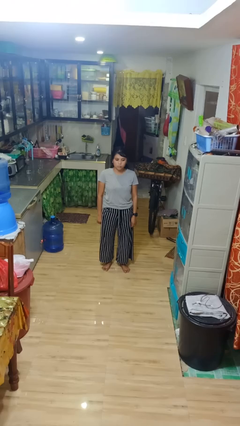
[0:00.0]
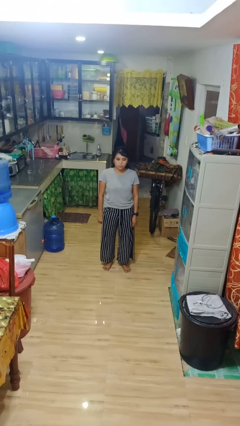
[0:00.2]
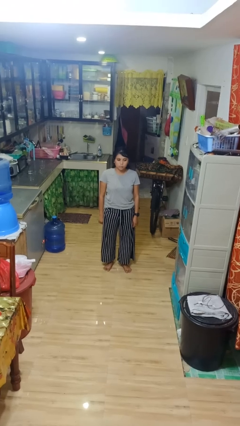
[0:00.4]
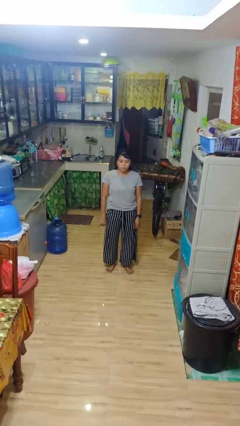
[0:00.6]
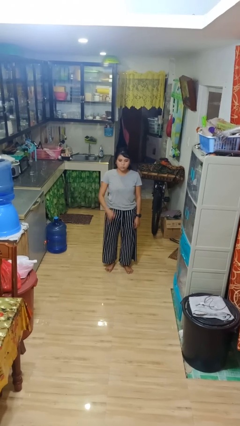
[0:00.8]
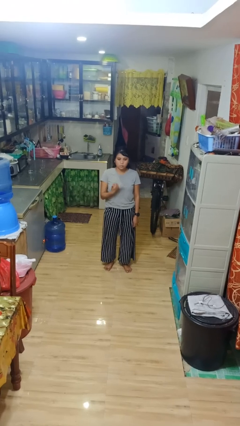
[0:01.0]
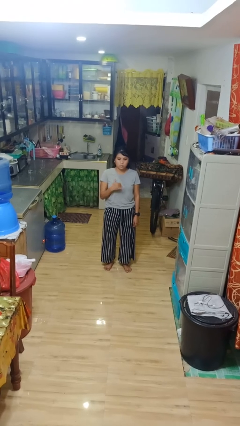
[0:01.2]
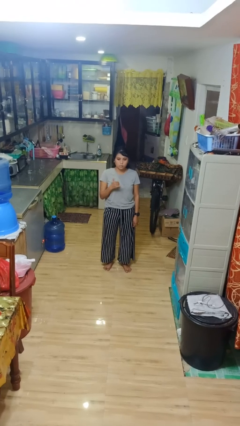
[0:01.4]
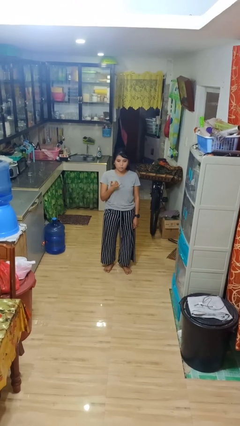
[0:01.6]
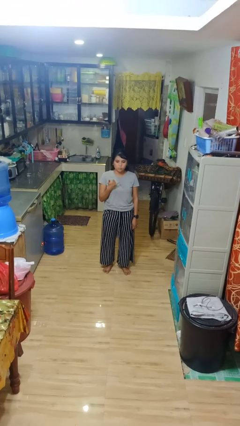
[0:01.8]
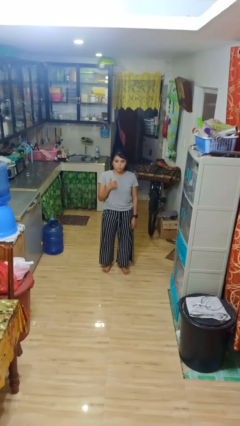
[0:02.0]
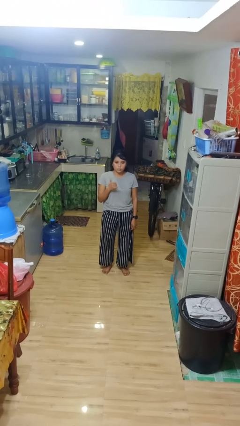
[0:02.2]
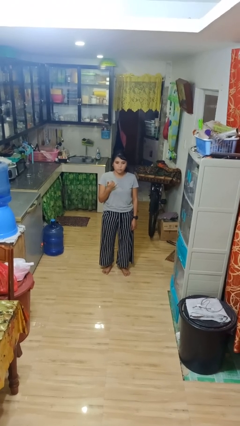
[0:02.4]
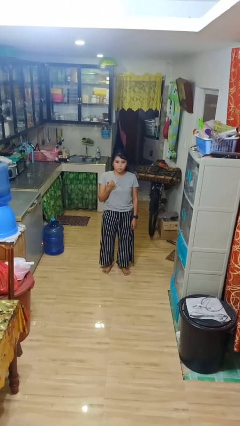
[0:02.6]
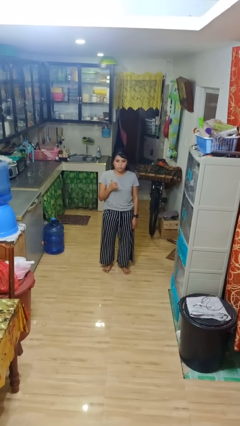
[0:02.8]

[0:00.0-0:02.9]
person gestures hang loose

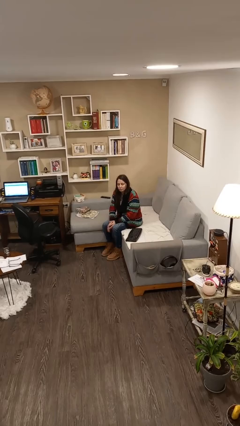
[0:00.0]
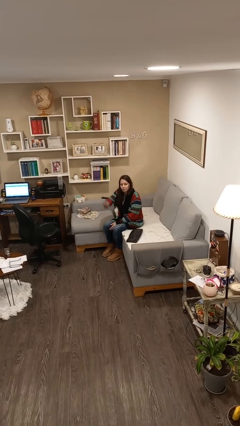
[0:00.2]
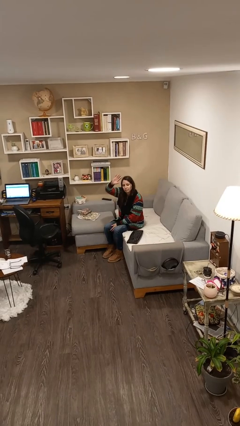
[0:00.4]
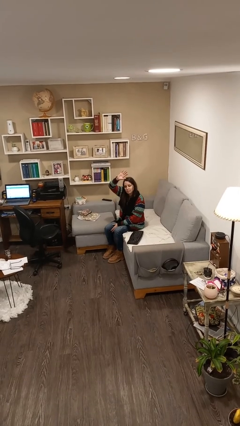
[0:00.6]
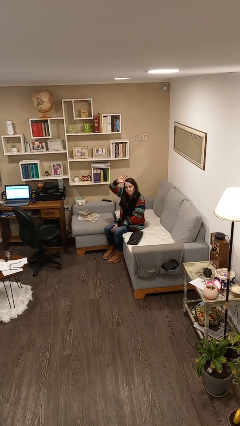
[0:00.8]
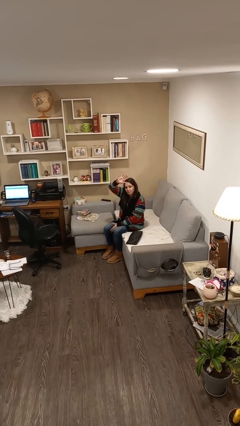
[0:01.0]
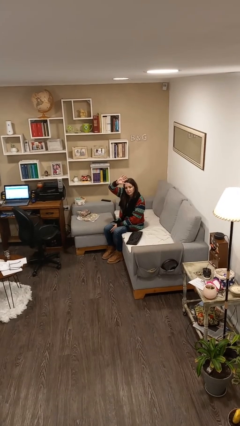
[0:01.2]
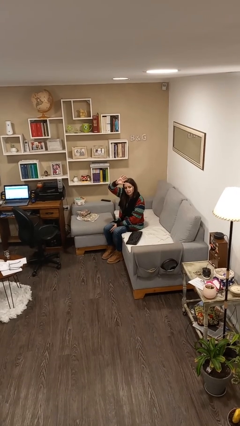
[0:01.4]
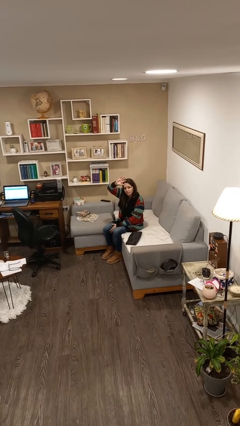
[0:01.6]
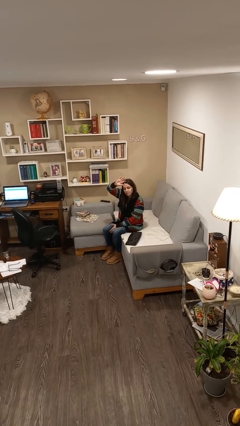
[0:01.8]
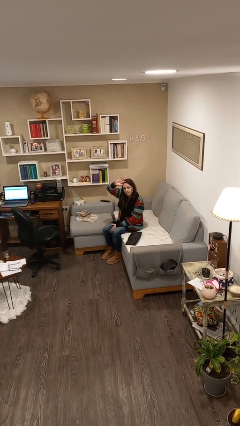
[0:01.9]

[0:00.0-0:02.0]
person gestures raise hand

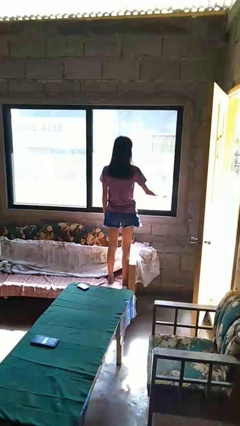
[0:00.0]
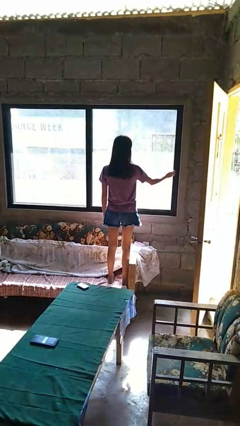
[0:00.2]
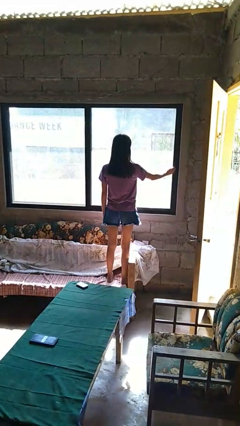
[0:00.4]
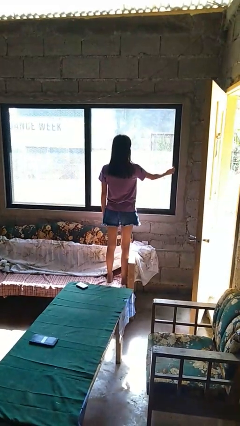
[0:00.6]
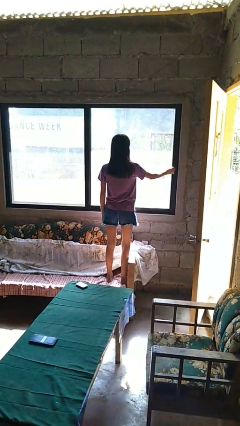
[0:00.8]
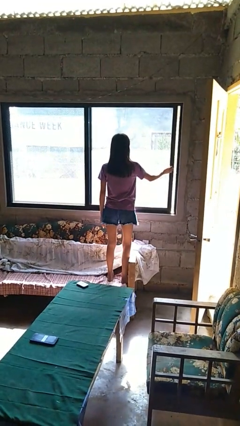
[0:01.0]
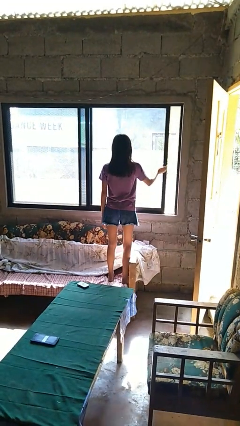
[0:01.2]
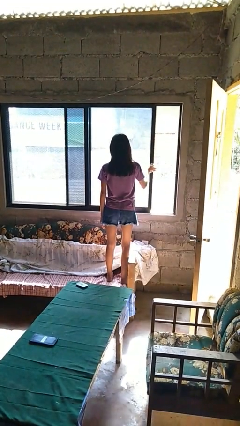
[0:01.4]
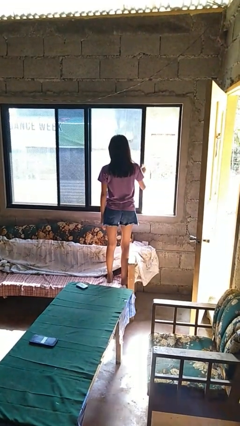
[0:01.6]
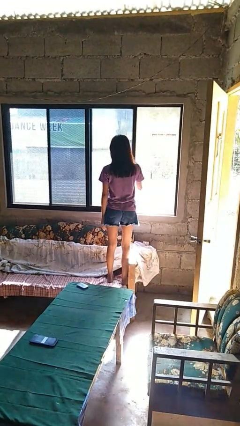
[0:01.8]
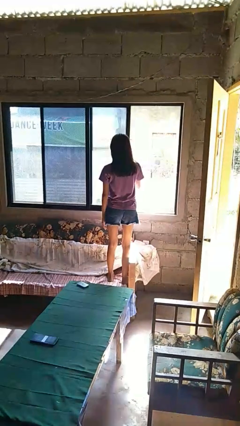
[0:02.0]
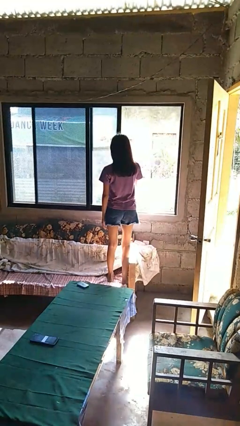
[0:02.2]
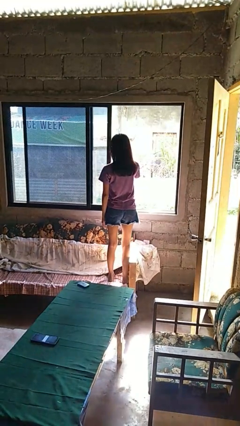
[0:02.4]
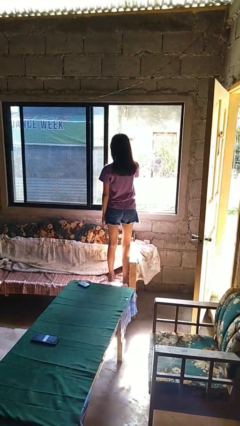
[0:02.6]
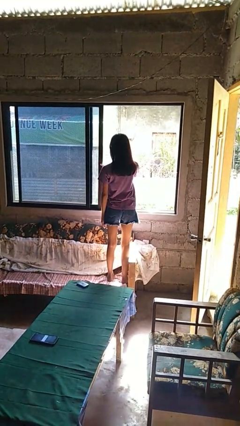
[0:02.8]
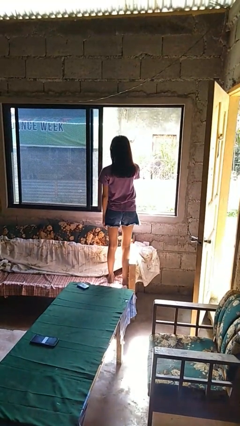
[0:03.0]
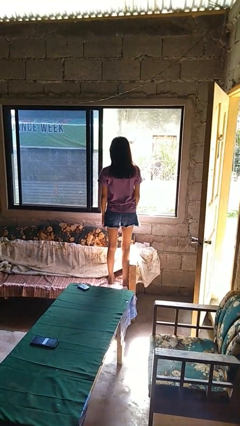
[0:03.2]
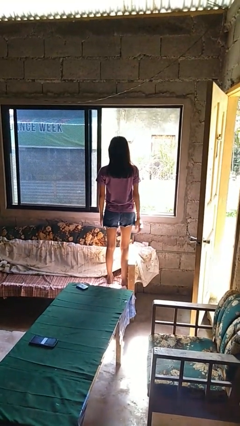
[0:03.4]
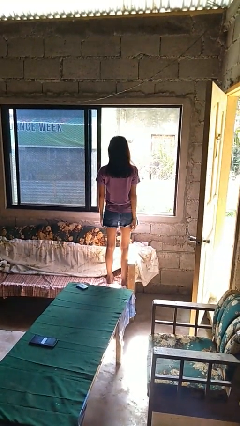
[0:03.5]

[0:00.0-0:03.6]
person opens home window

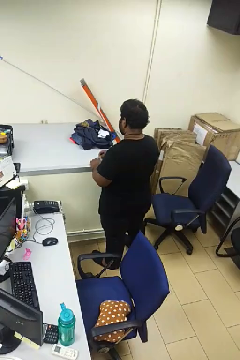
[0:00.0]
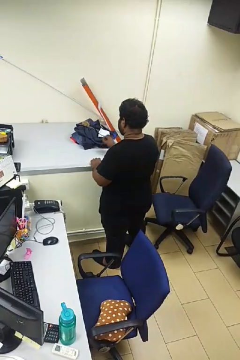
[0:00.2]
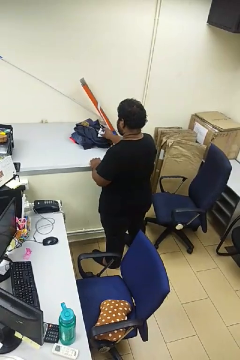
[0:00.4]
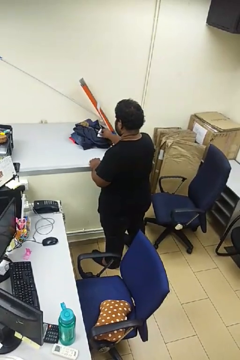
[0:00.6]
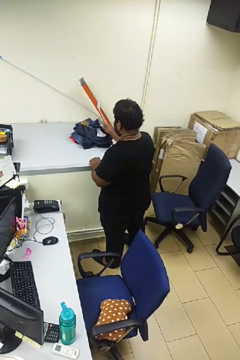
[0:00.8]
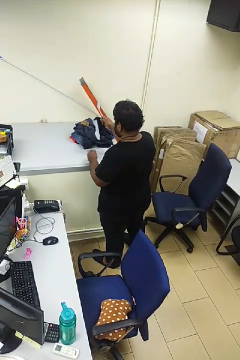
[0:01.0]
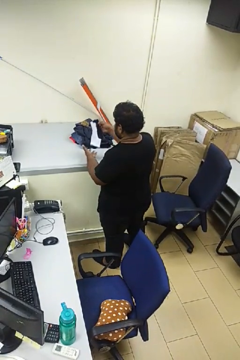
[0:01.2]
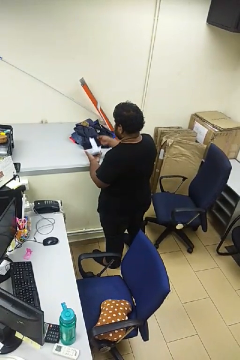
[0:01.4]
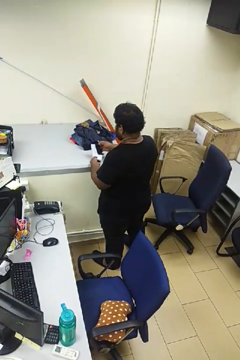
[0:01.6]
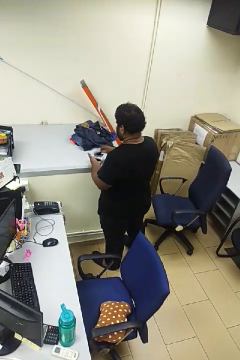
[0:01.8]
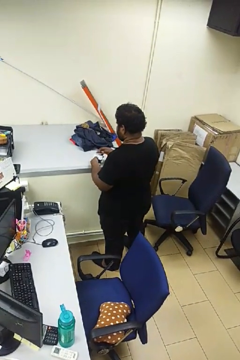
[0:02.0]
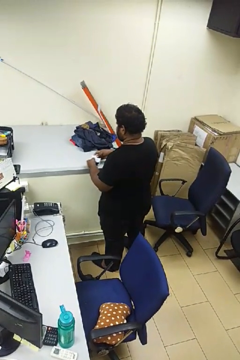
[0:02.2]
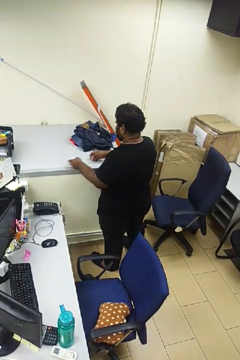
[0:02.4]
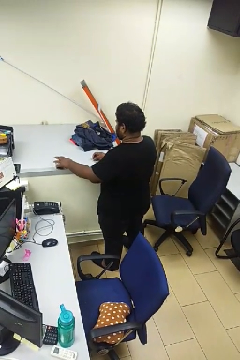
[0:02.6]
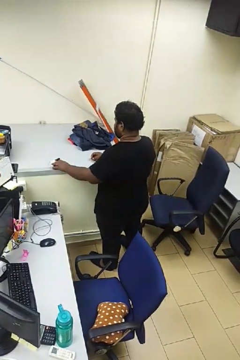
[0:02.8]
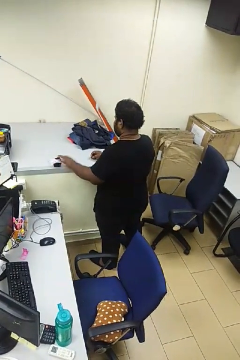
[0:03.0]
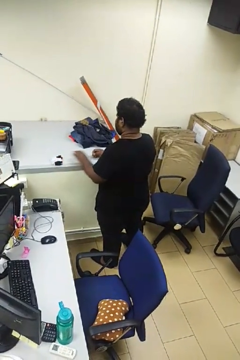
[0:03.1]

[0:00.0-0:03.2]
person folds socks

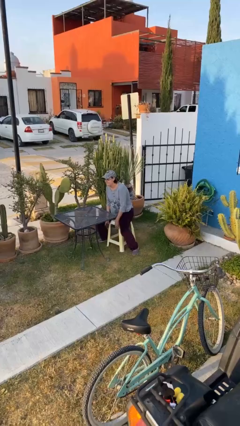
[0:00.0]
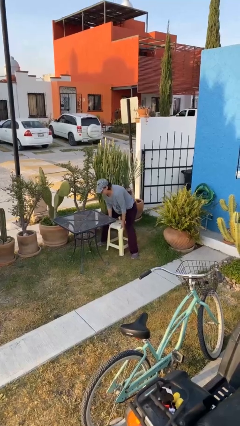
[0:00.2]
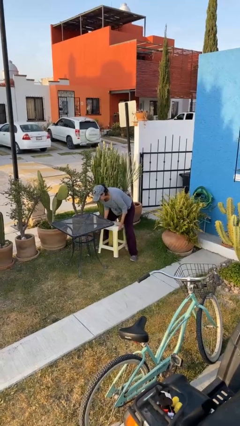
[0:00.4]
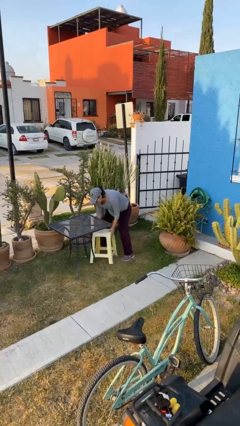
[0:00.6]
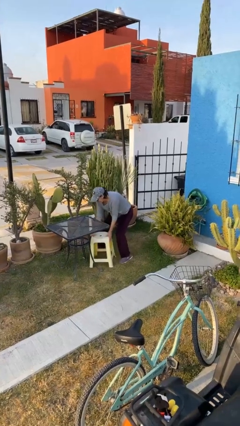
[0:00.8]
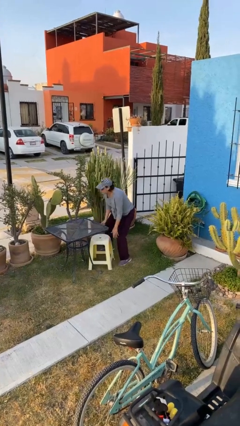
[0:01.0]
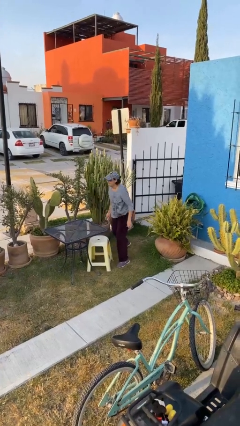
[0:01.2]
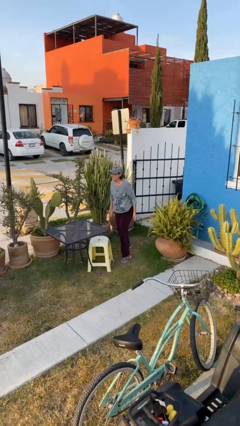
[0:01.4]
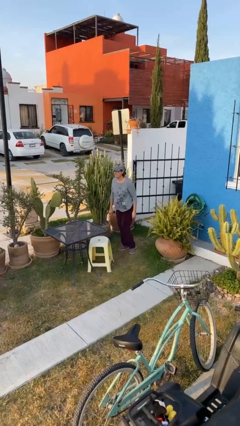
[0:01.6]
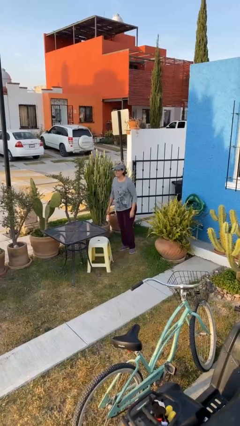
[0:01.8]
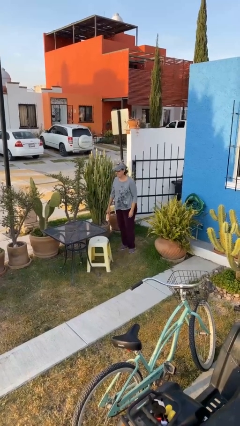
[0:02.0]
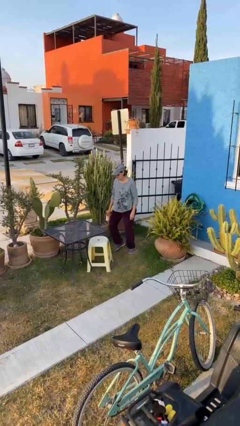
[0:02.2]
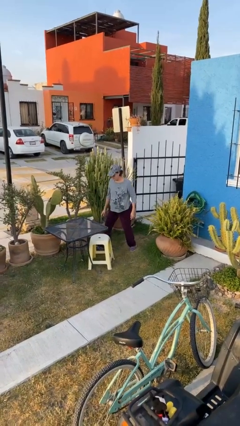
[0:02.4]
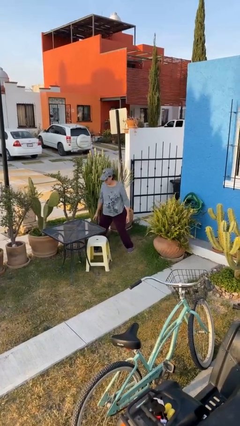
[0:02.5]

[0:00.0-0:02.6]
person stands up

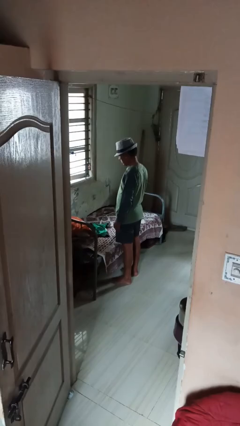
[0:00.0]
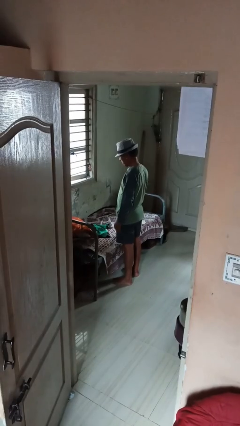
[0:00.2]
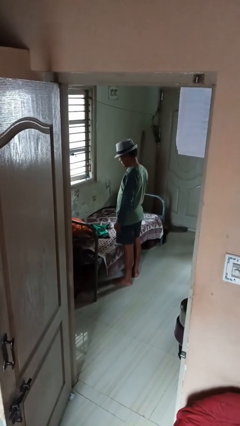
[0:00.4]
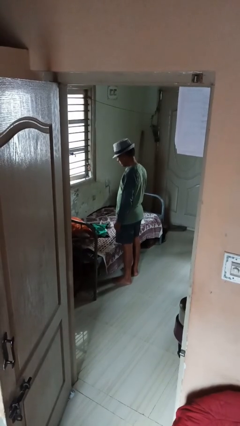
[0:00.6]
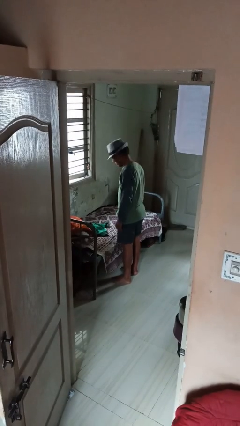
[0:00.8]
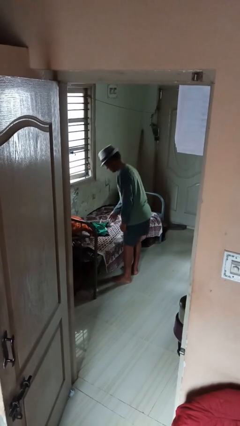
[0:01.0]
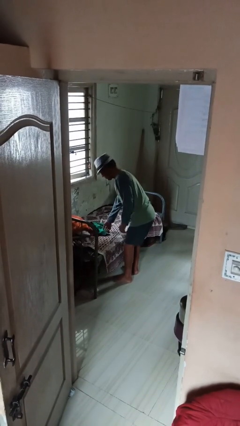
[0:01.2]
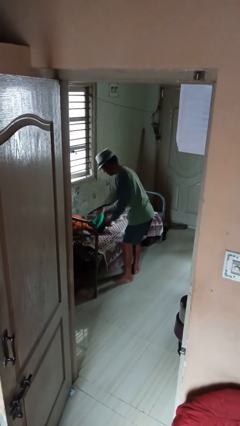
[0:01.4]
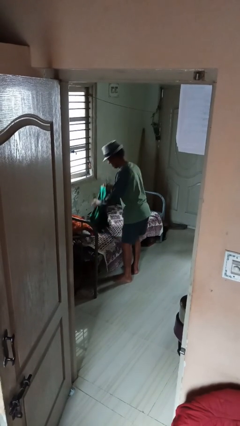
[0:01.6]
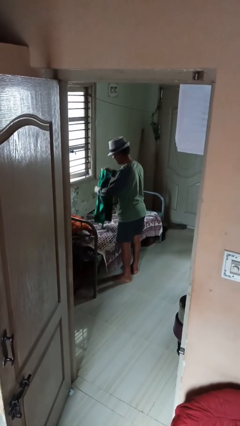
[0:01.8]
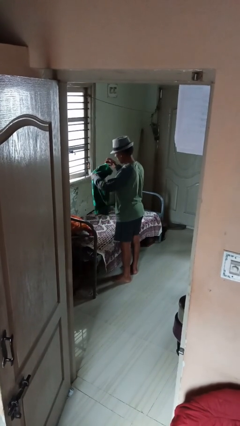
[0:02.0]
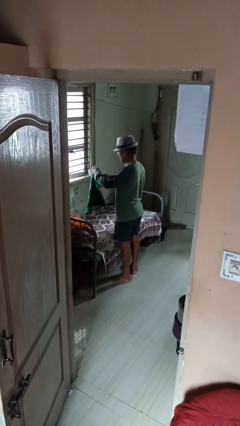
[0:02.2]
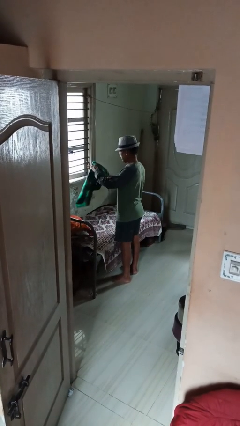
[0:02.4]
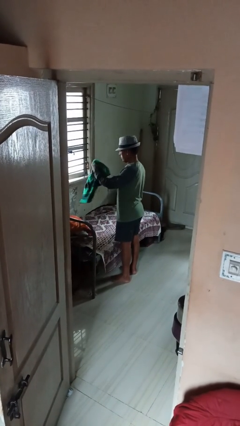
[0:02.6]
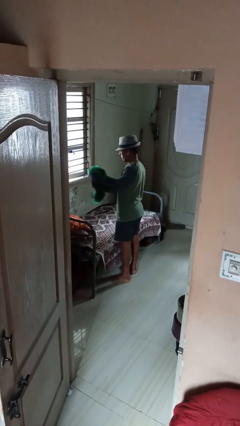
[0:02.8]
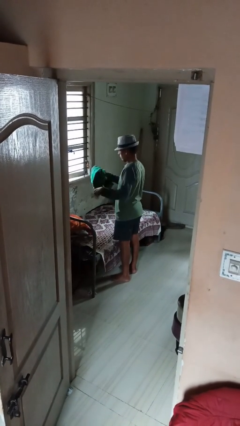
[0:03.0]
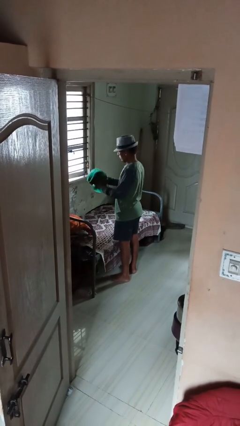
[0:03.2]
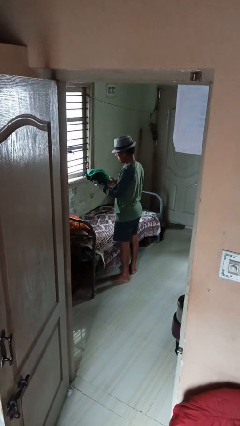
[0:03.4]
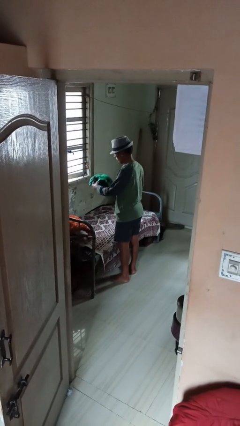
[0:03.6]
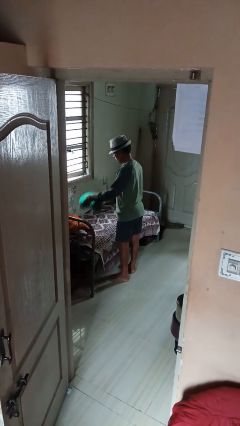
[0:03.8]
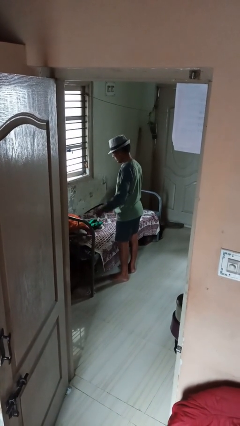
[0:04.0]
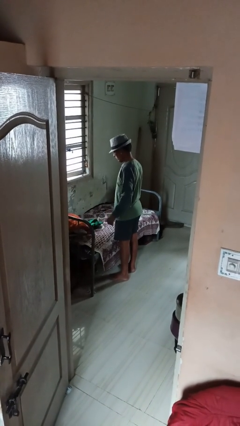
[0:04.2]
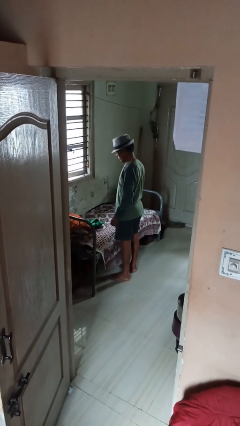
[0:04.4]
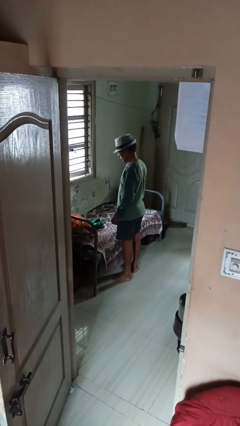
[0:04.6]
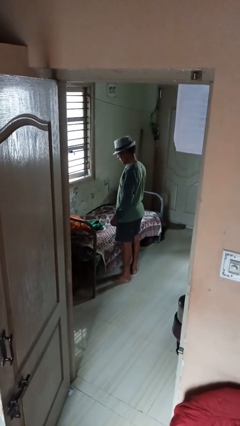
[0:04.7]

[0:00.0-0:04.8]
person folds shirt
